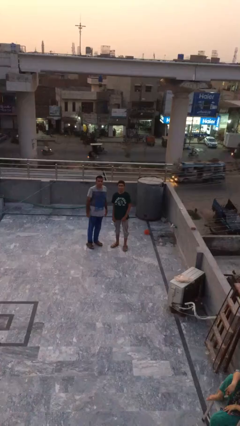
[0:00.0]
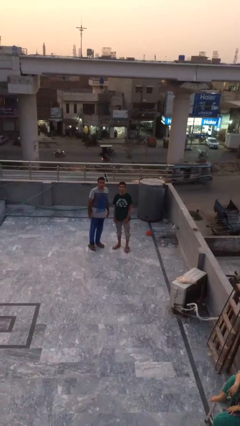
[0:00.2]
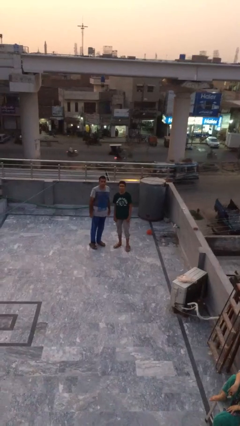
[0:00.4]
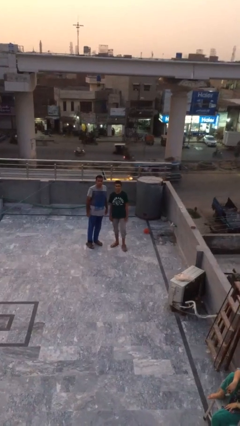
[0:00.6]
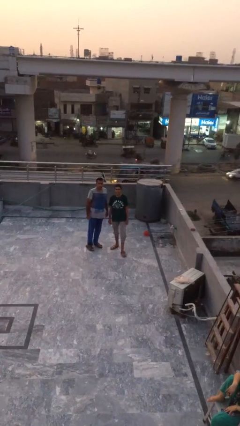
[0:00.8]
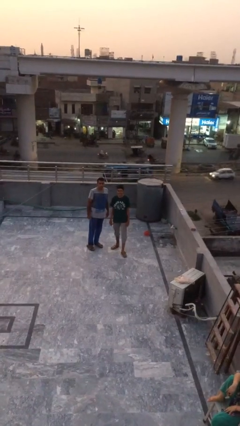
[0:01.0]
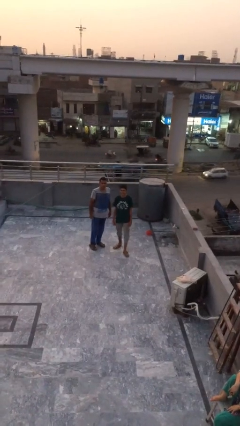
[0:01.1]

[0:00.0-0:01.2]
person talks to person

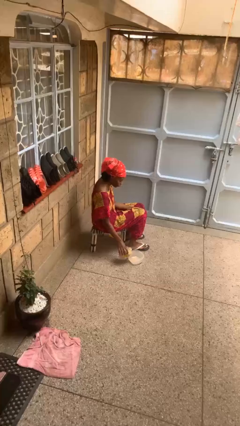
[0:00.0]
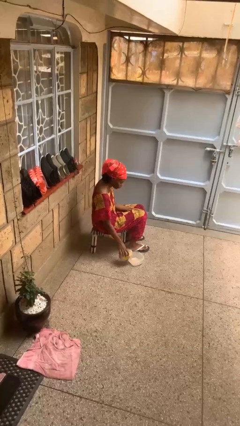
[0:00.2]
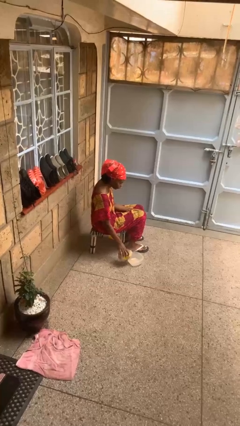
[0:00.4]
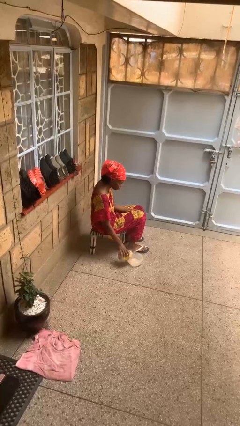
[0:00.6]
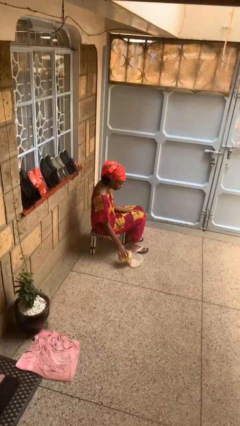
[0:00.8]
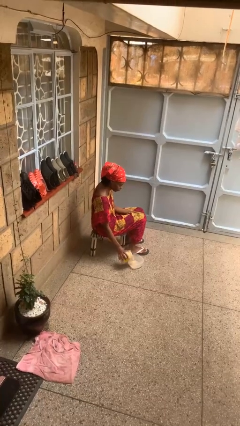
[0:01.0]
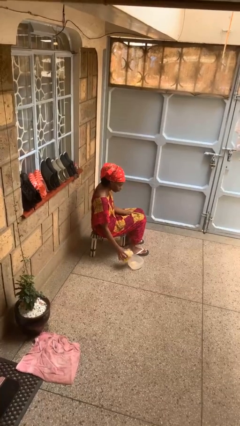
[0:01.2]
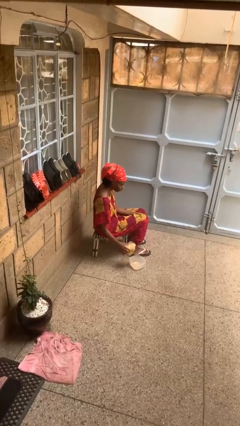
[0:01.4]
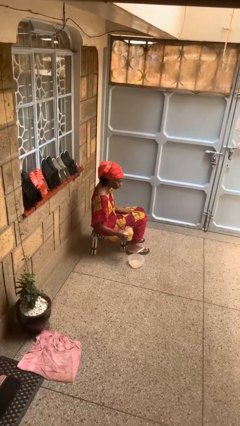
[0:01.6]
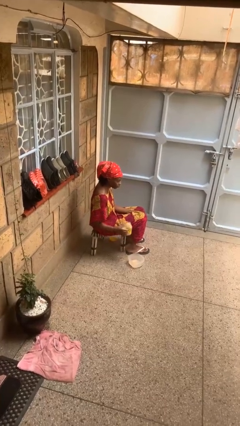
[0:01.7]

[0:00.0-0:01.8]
person pours into bowl

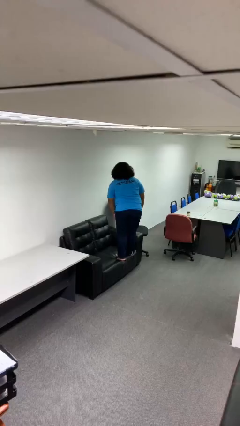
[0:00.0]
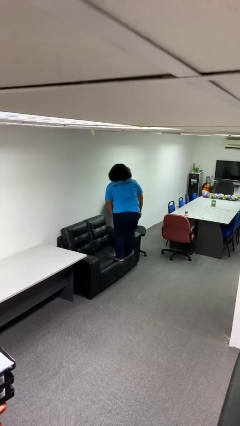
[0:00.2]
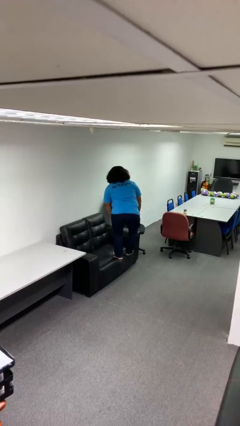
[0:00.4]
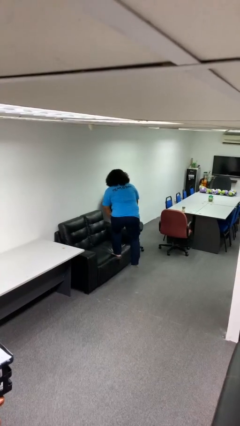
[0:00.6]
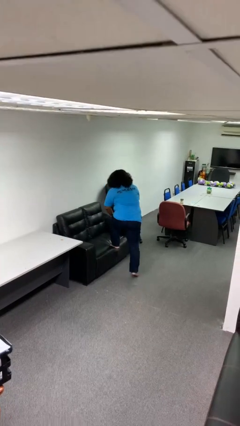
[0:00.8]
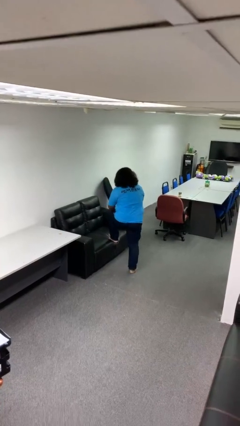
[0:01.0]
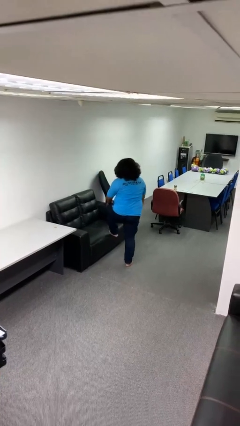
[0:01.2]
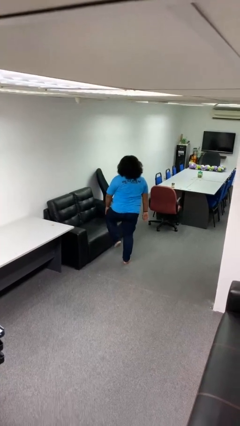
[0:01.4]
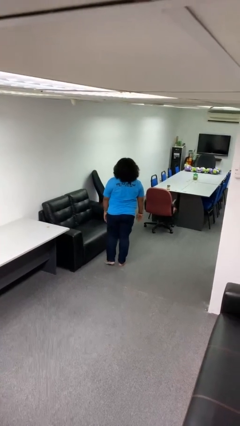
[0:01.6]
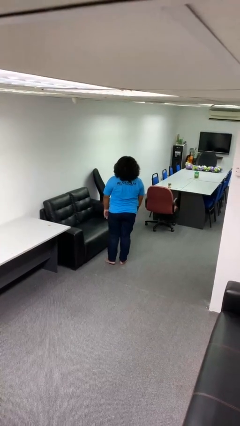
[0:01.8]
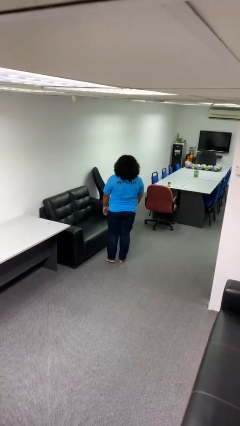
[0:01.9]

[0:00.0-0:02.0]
person climbs off couch

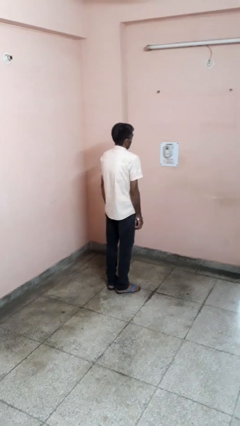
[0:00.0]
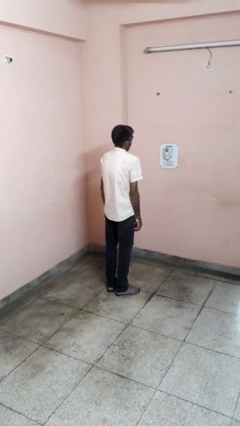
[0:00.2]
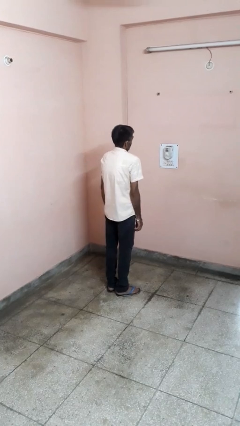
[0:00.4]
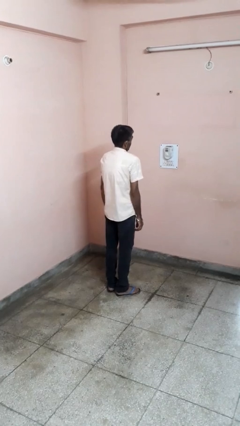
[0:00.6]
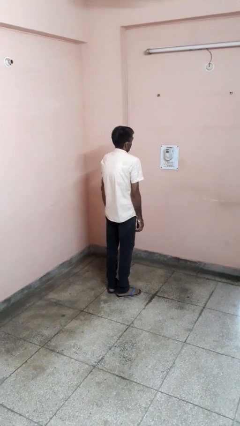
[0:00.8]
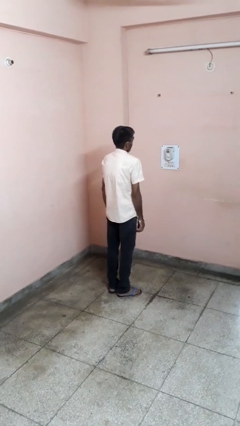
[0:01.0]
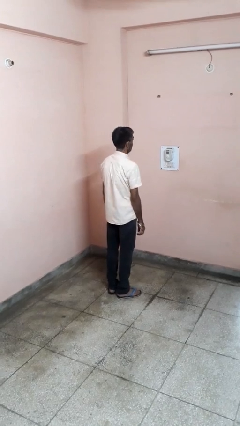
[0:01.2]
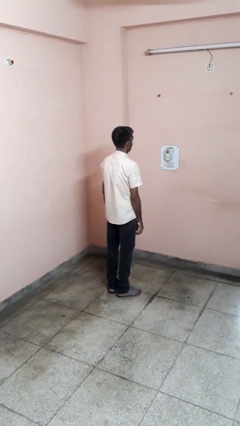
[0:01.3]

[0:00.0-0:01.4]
person shrugs

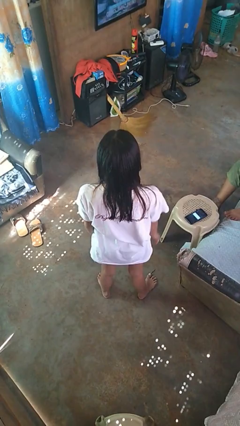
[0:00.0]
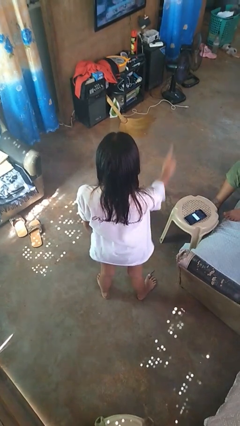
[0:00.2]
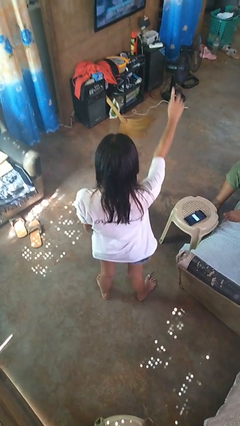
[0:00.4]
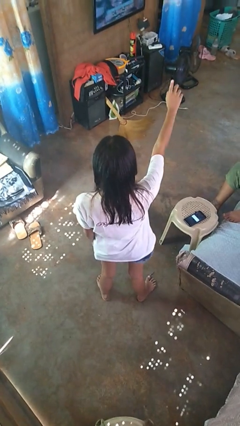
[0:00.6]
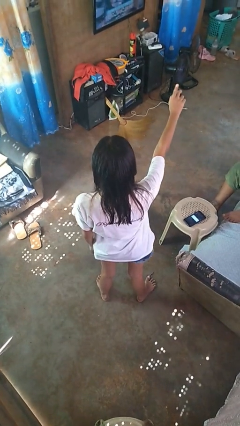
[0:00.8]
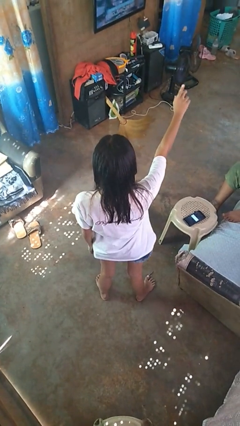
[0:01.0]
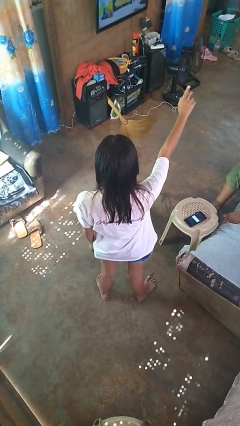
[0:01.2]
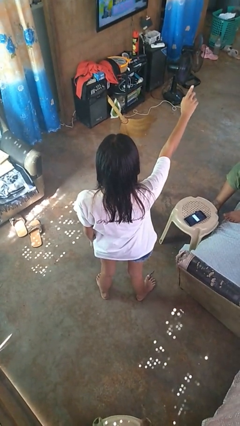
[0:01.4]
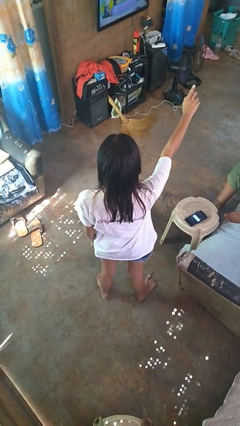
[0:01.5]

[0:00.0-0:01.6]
person gestures number three

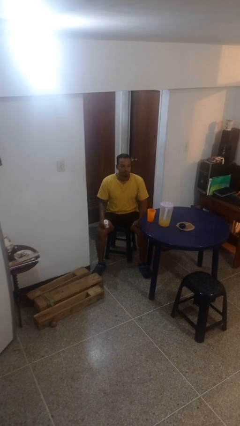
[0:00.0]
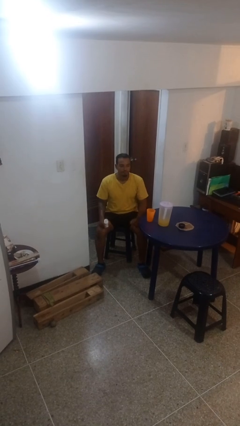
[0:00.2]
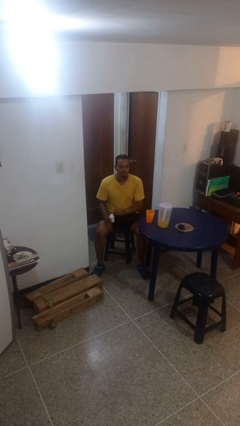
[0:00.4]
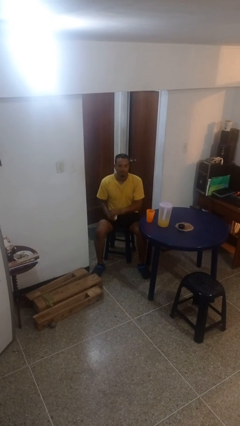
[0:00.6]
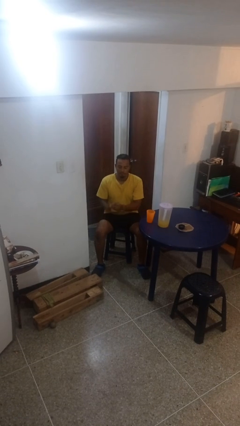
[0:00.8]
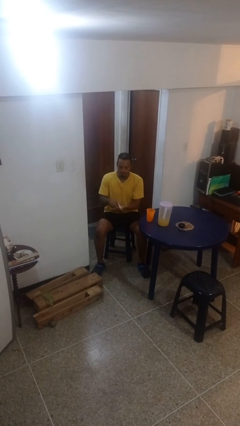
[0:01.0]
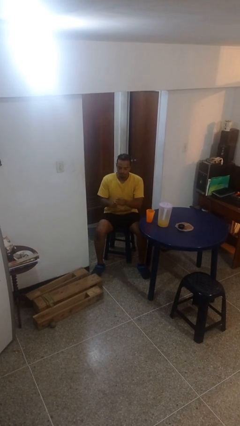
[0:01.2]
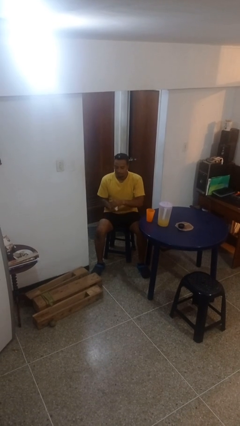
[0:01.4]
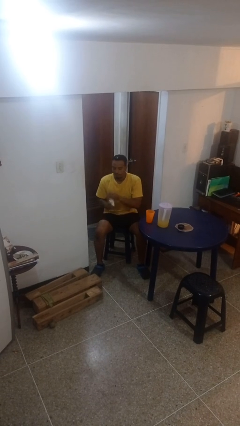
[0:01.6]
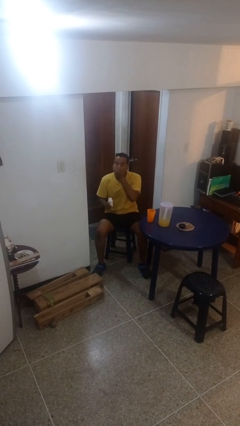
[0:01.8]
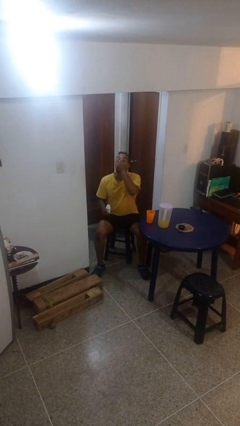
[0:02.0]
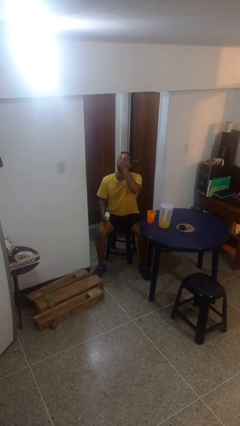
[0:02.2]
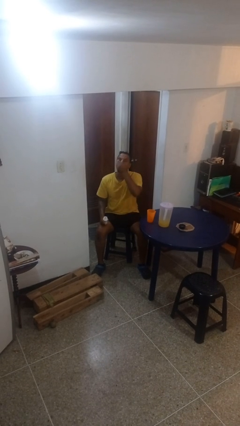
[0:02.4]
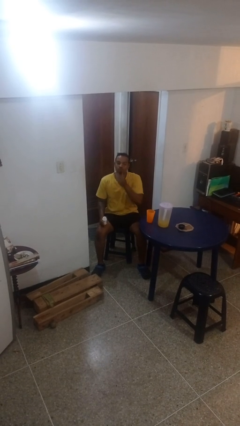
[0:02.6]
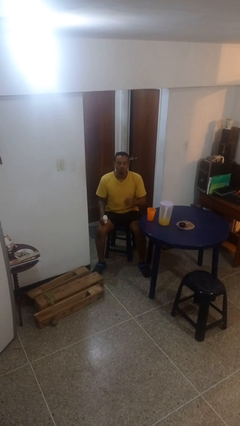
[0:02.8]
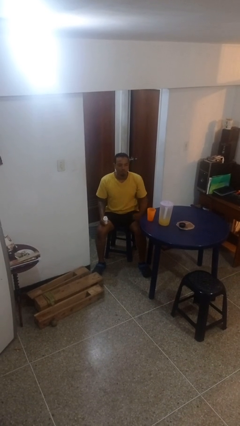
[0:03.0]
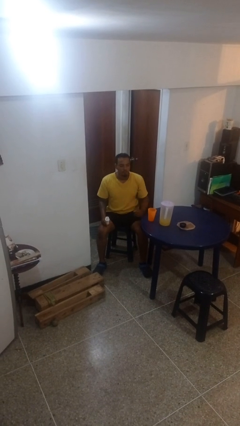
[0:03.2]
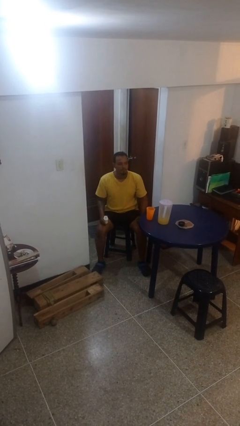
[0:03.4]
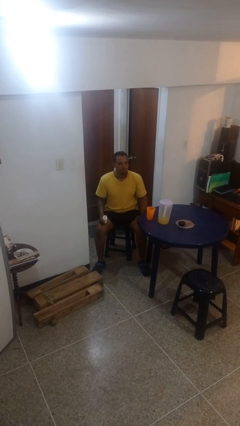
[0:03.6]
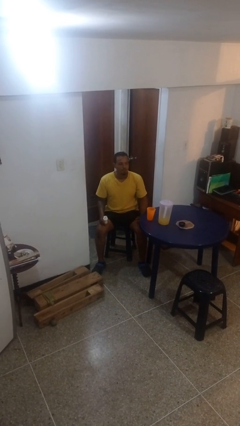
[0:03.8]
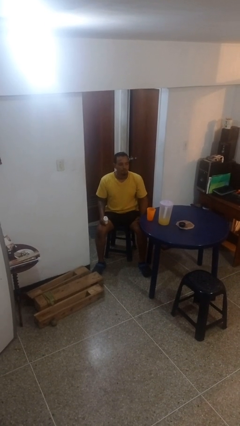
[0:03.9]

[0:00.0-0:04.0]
person takes medicine pills

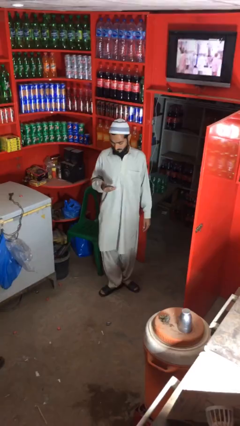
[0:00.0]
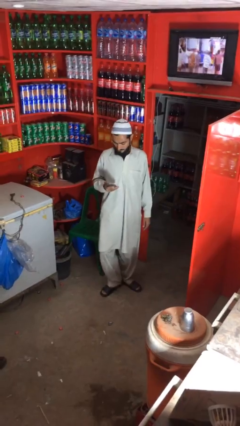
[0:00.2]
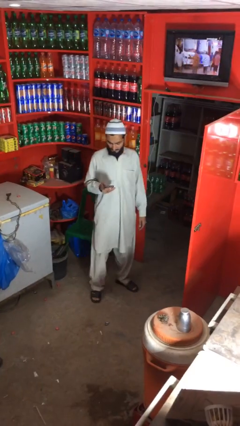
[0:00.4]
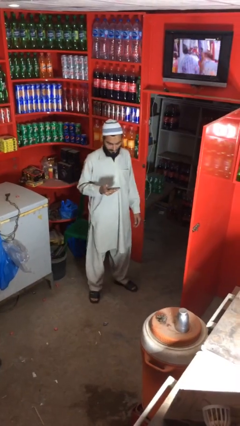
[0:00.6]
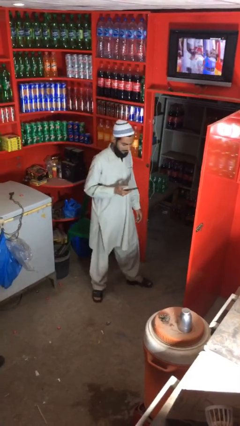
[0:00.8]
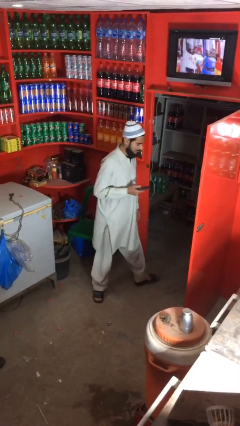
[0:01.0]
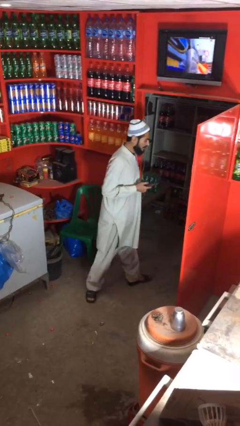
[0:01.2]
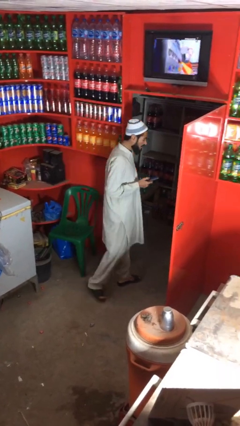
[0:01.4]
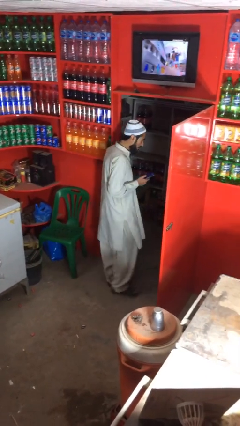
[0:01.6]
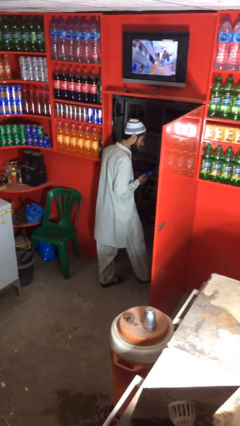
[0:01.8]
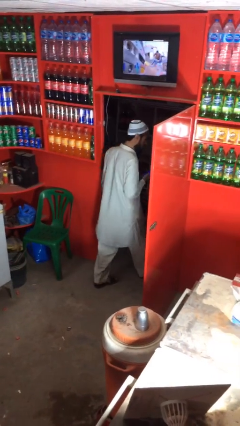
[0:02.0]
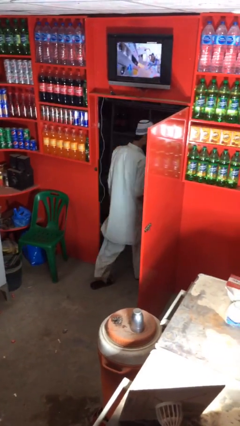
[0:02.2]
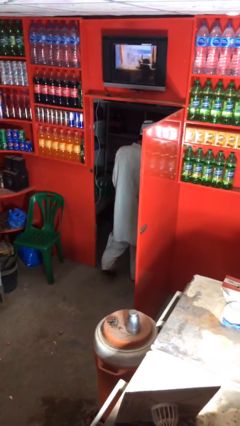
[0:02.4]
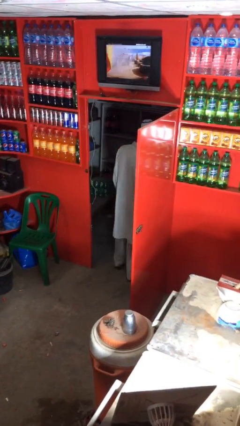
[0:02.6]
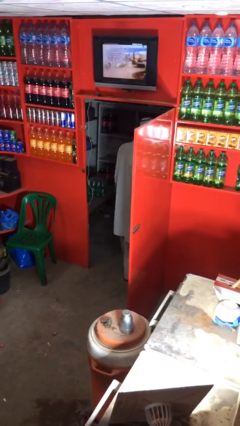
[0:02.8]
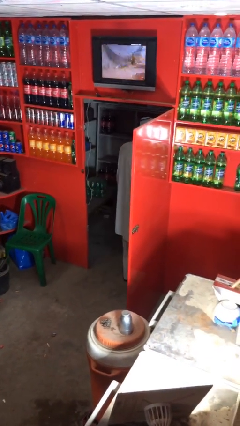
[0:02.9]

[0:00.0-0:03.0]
person enters scene through structure

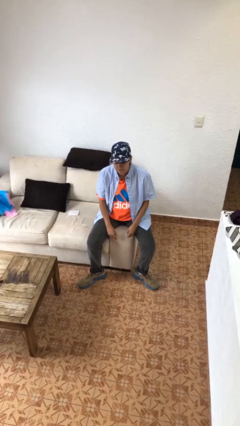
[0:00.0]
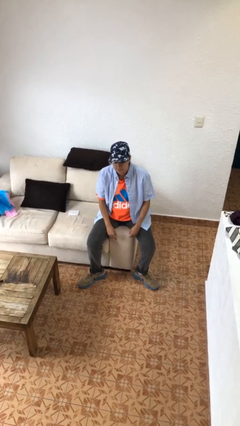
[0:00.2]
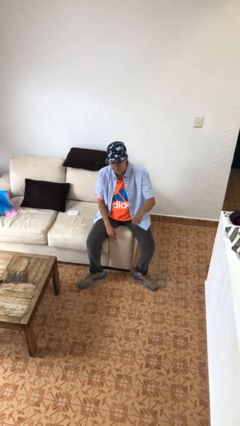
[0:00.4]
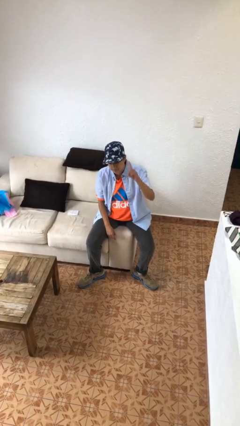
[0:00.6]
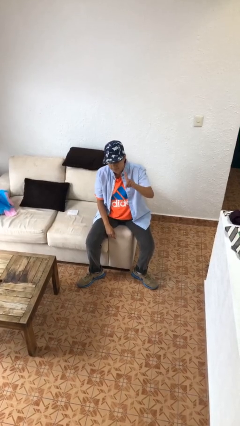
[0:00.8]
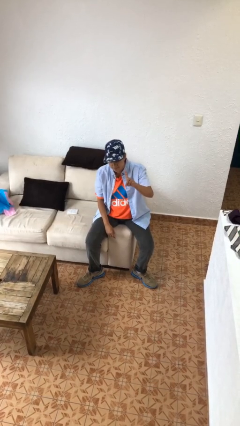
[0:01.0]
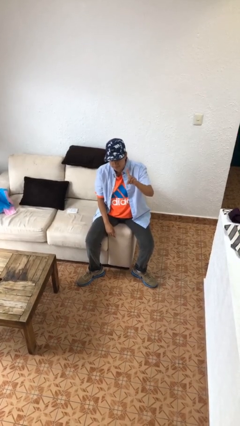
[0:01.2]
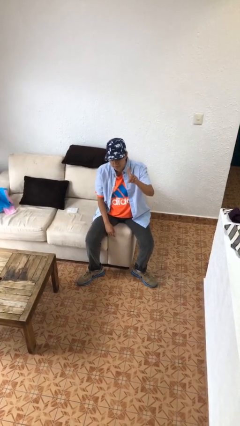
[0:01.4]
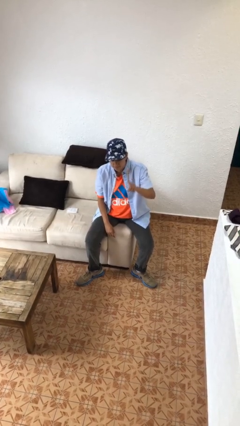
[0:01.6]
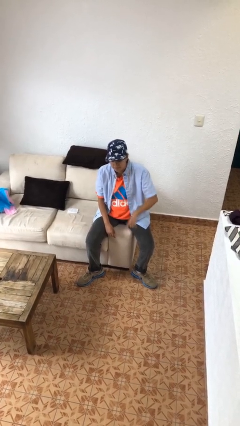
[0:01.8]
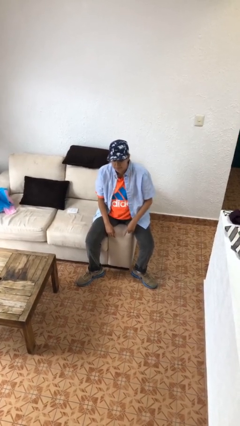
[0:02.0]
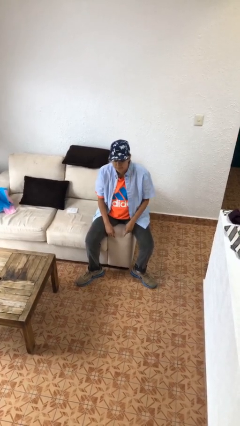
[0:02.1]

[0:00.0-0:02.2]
person gestures number one
